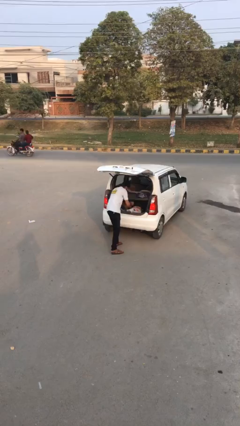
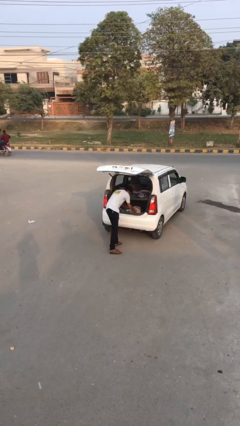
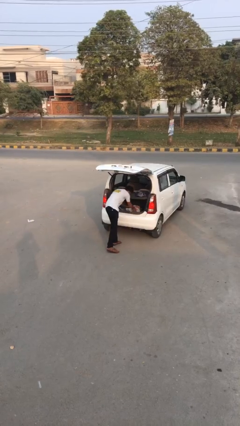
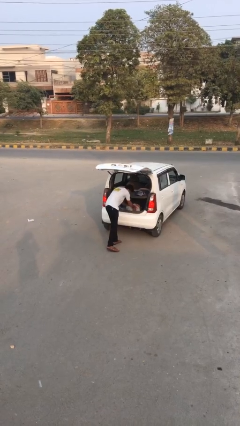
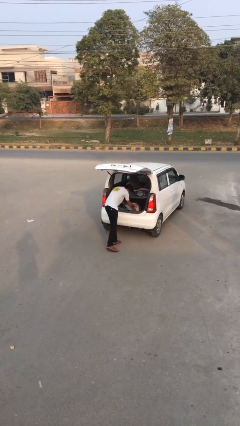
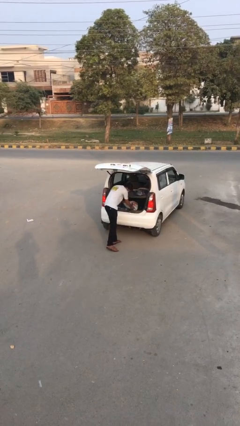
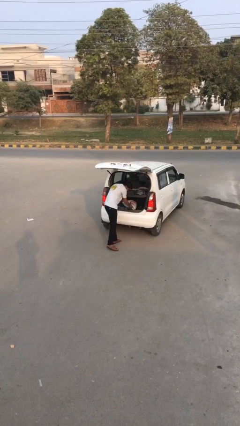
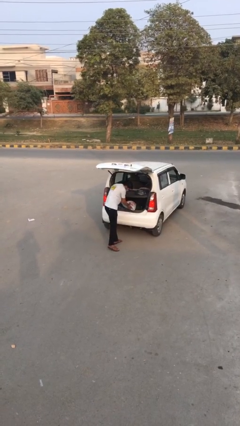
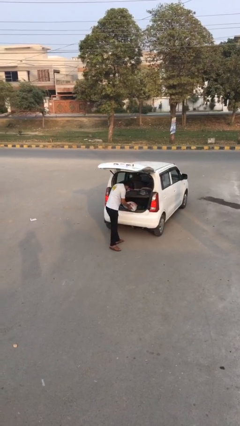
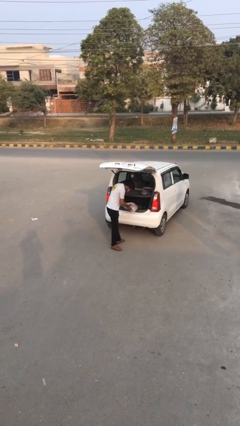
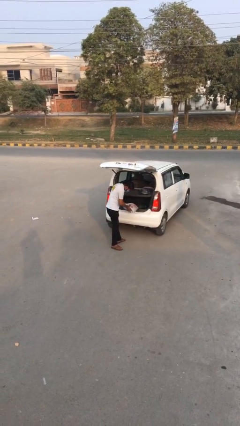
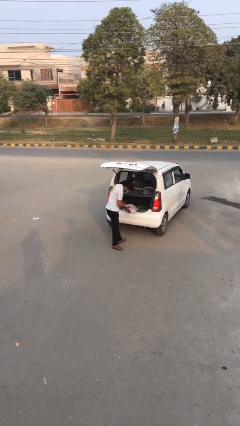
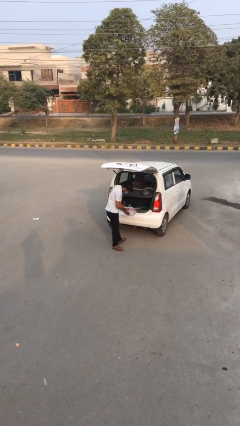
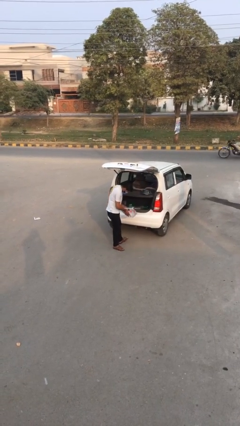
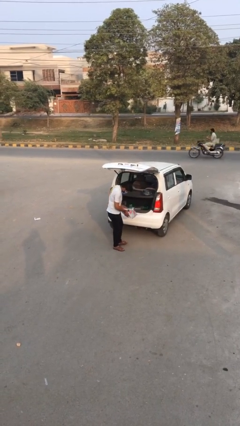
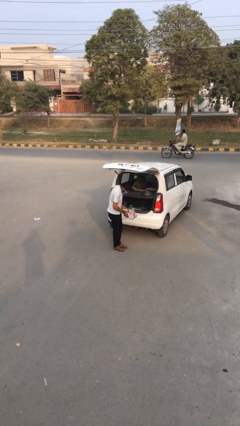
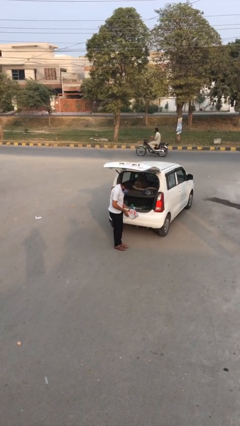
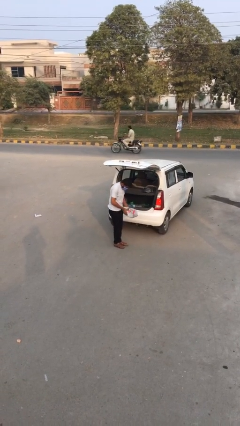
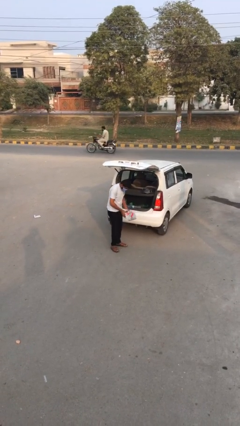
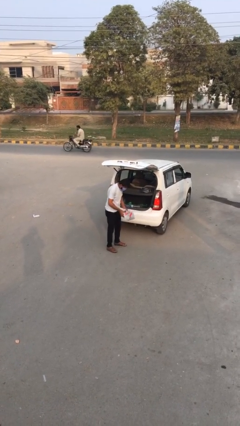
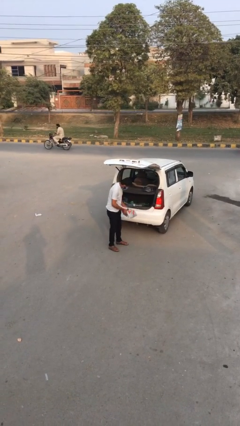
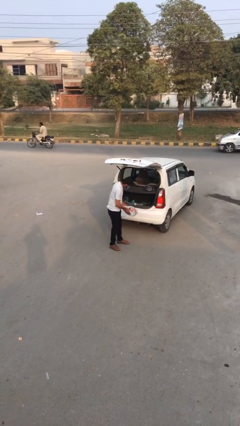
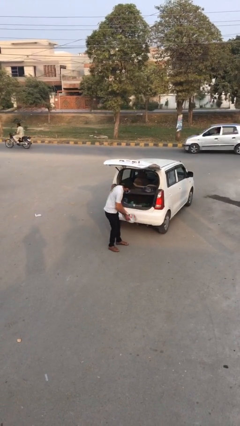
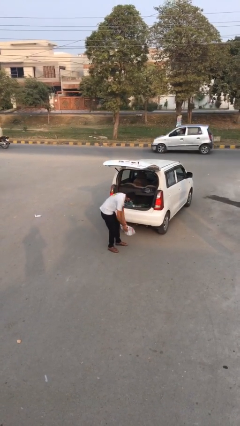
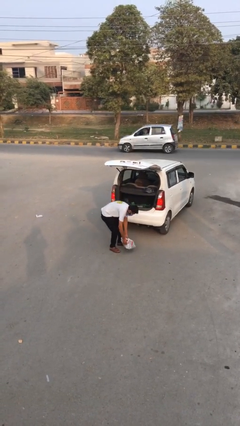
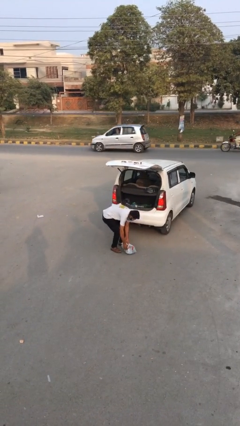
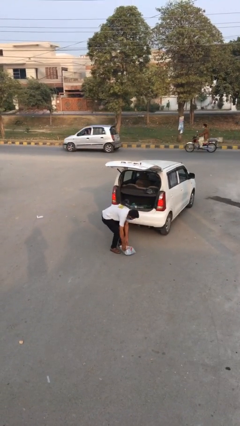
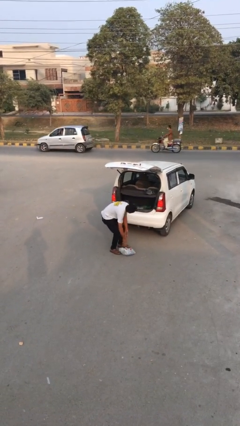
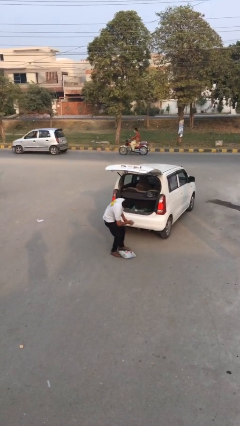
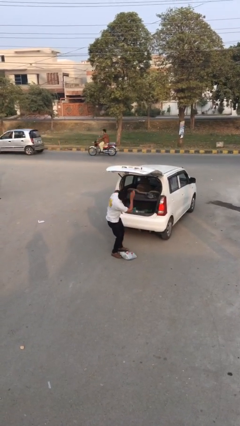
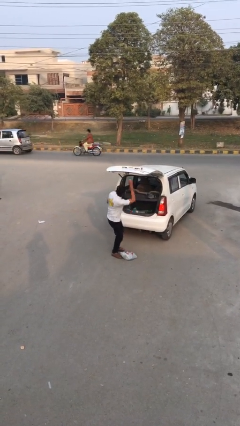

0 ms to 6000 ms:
person unloads car

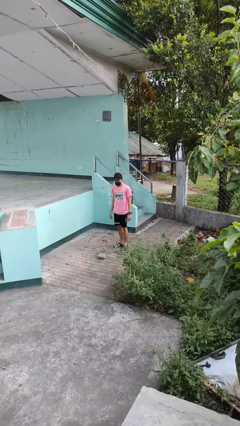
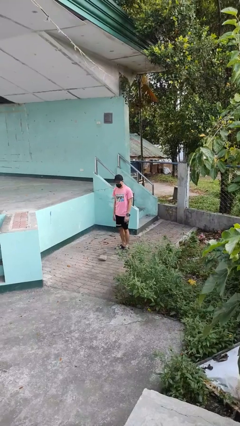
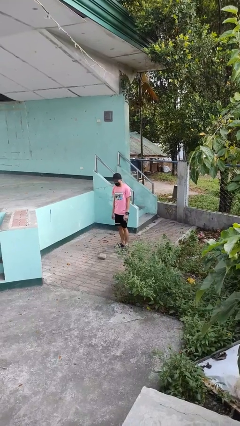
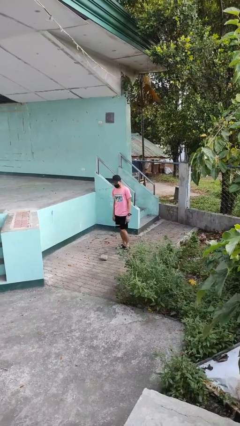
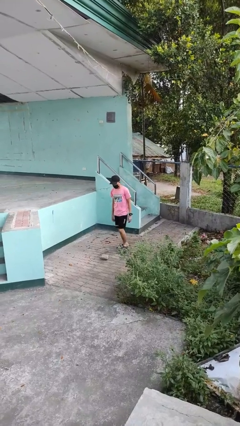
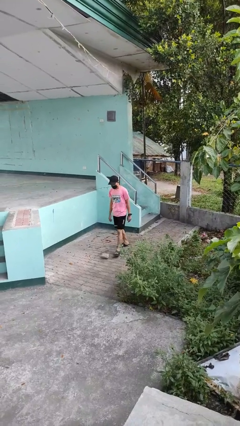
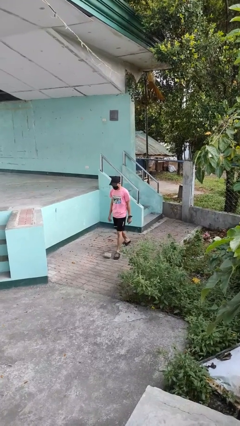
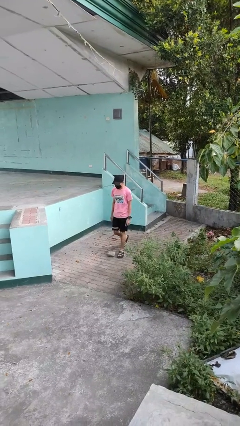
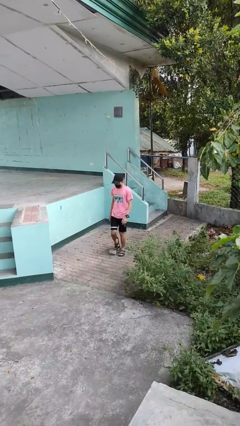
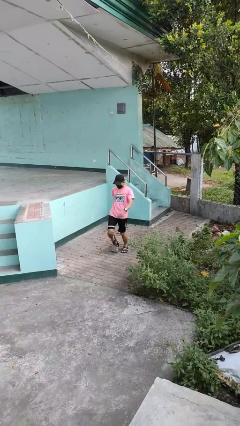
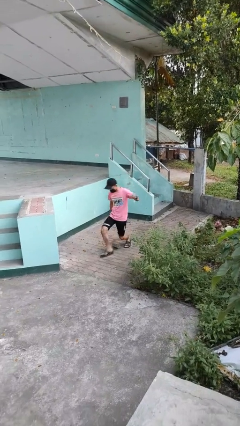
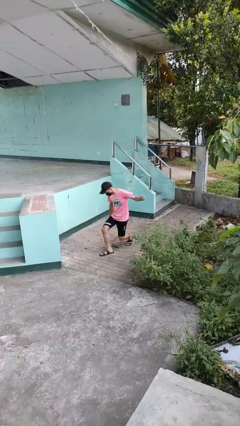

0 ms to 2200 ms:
person trips on object on floor

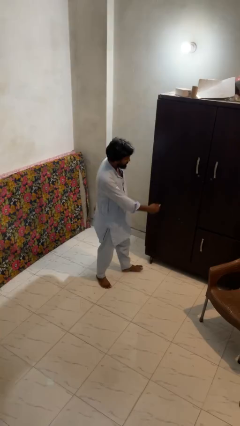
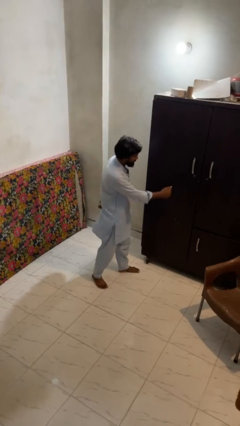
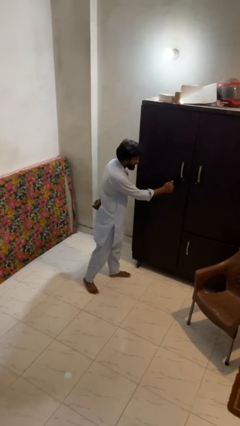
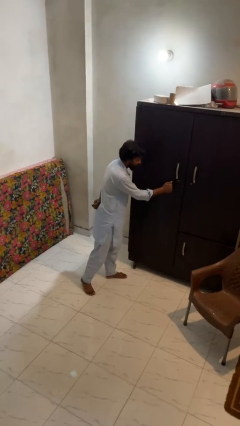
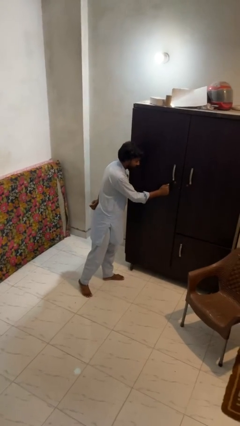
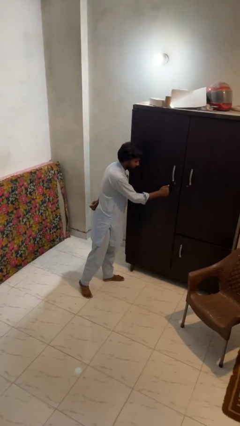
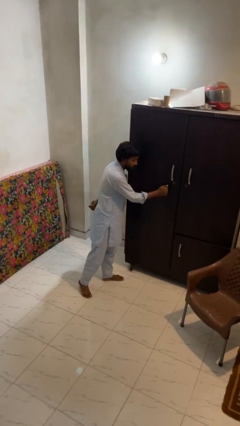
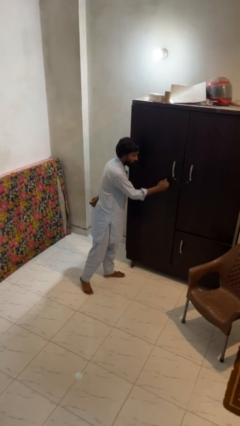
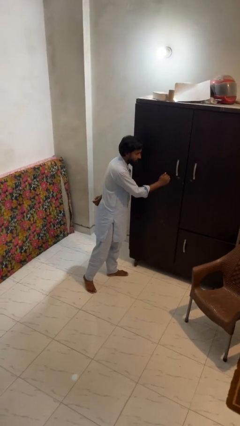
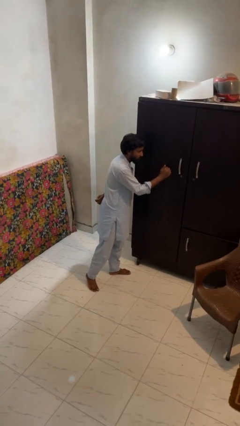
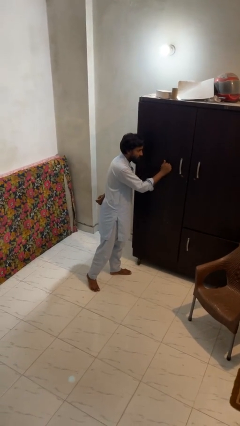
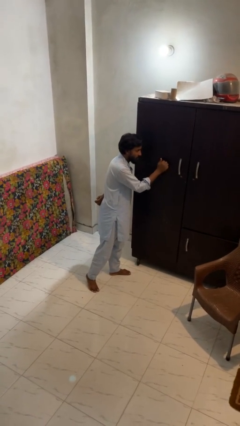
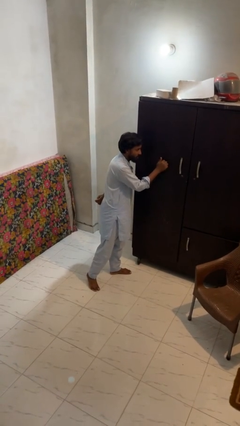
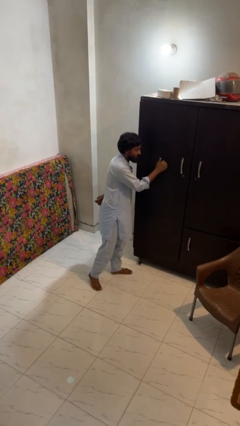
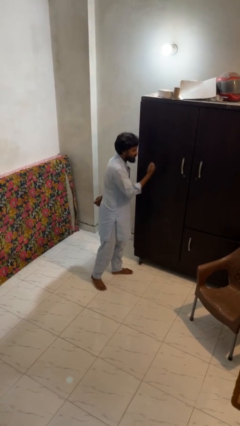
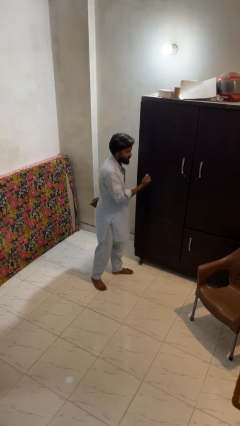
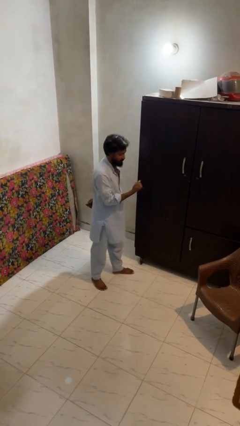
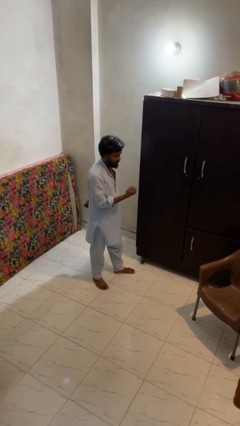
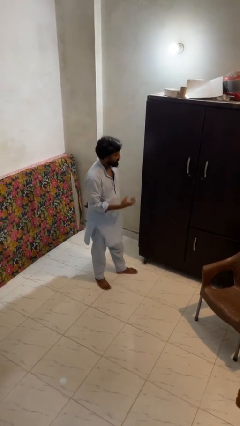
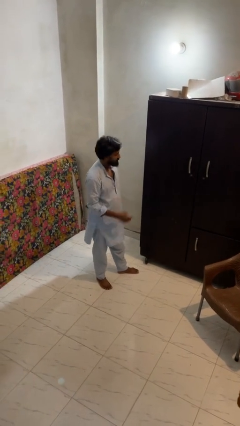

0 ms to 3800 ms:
person taps object with finger

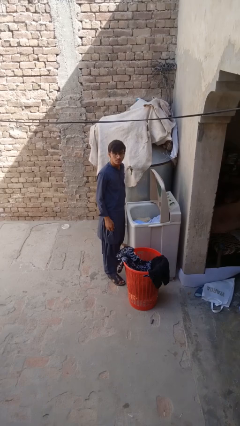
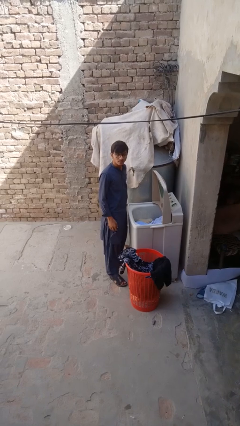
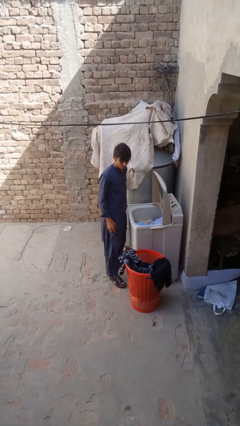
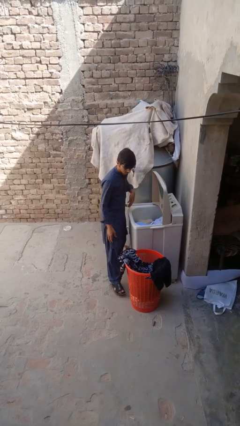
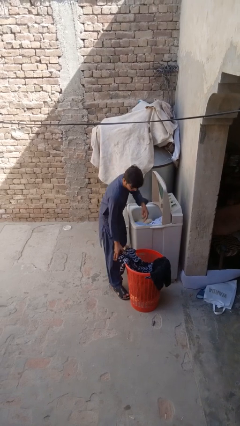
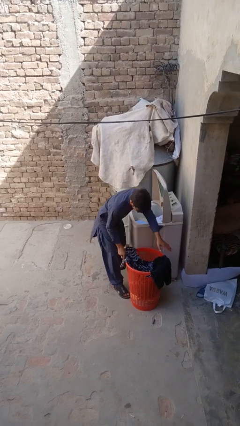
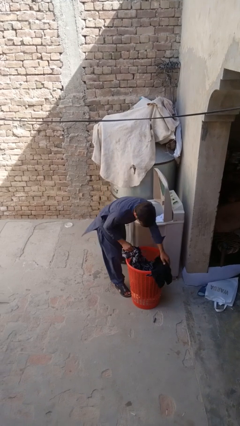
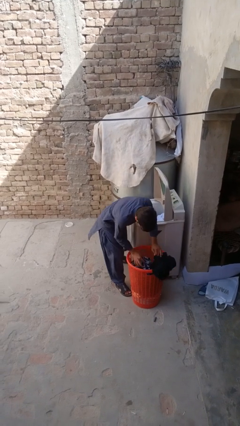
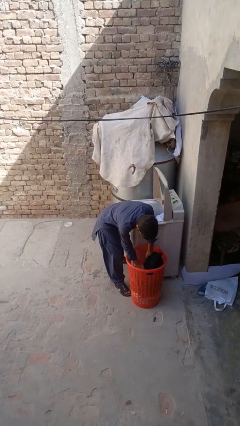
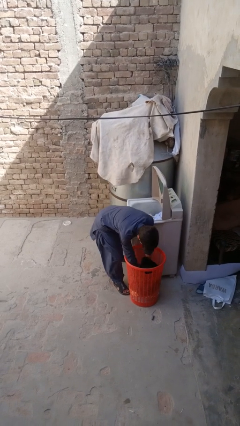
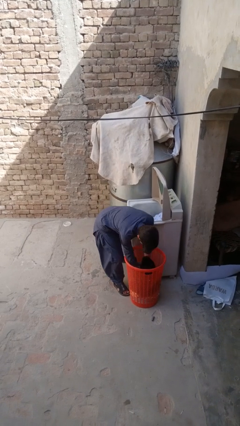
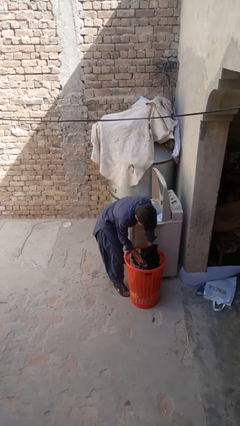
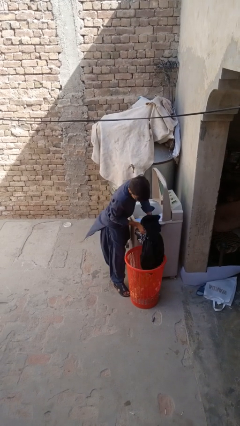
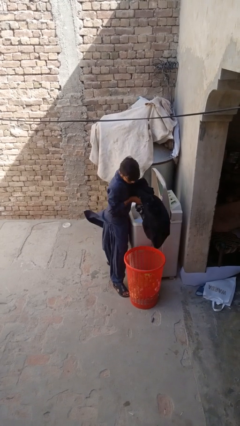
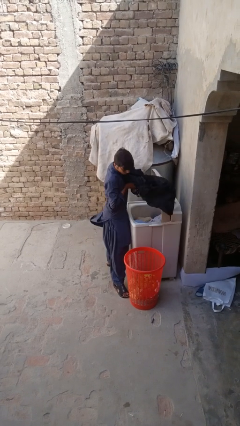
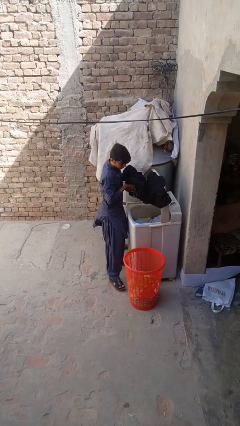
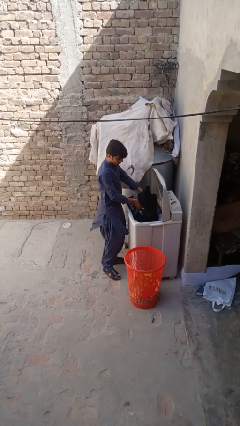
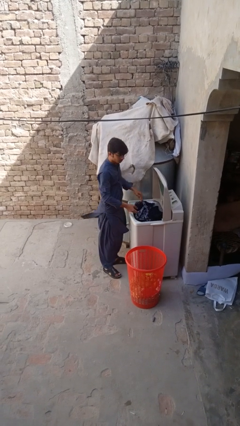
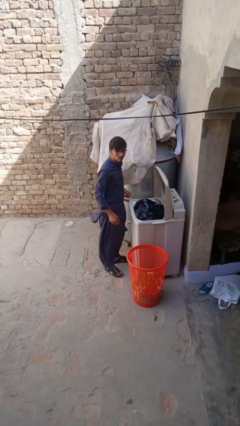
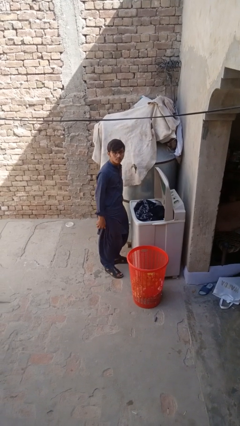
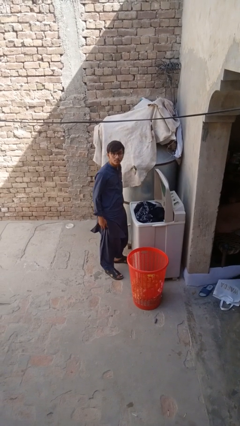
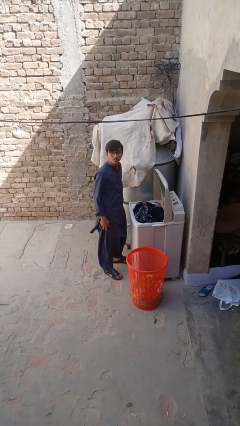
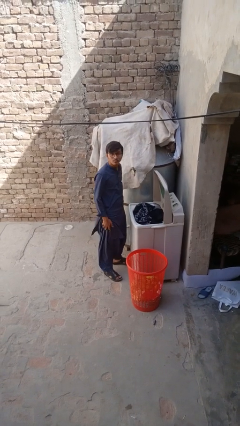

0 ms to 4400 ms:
person loads clotheswasher

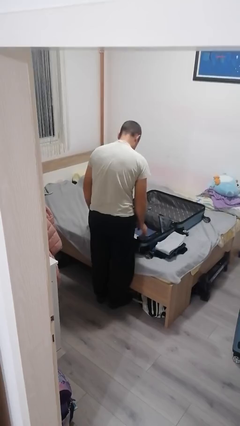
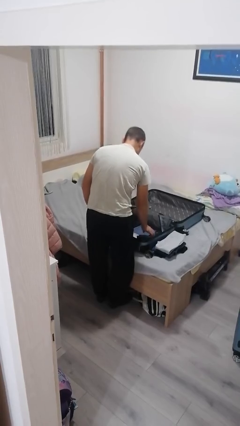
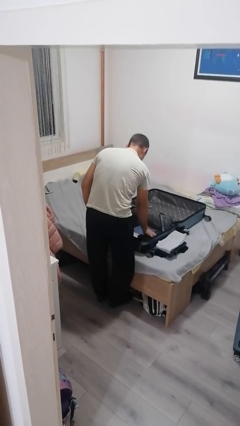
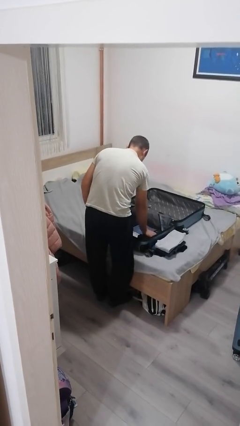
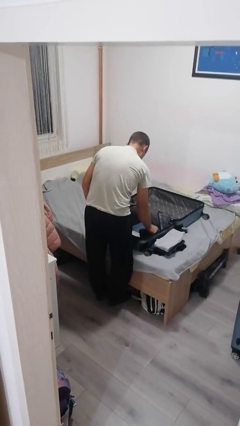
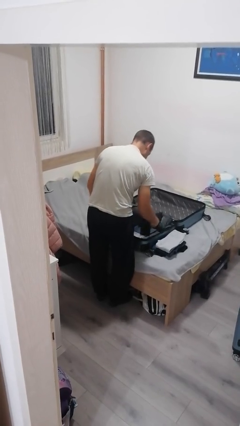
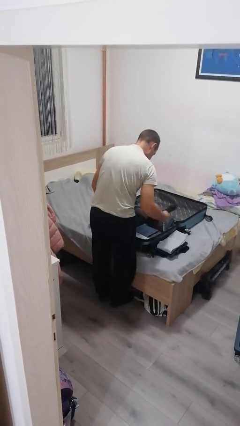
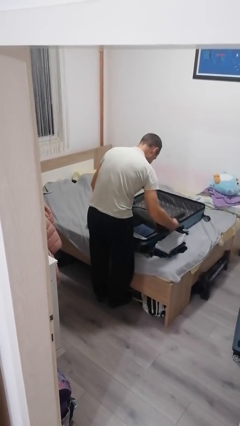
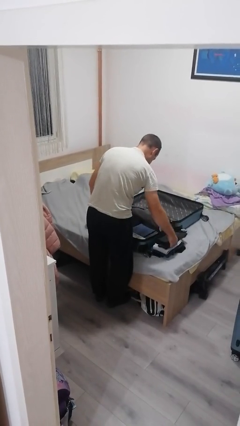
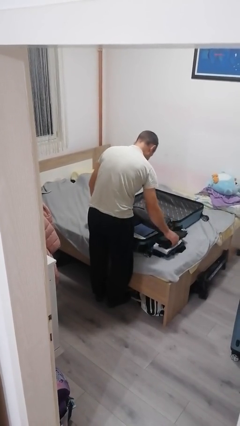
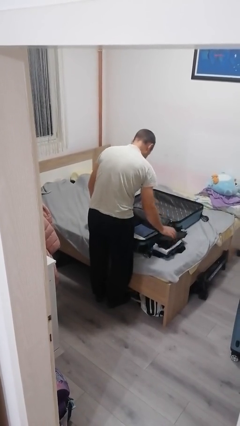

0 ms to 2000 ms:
person unloads clothes from suitcase
